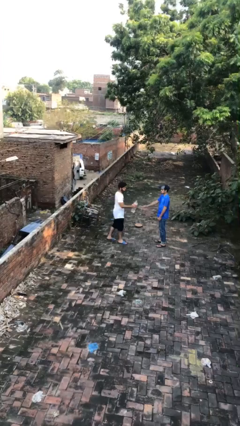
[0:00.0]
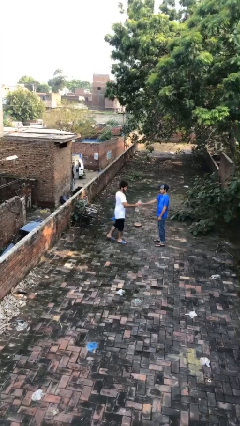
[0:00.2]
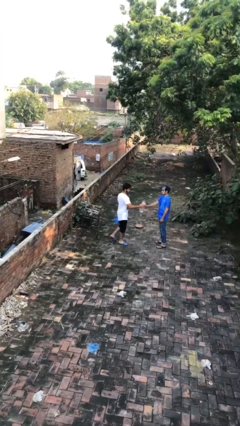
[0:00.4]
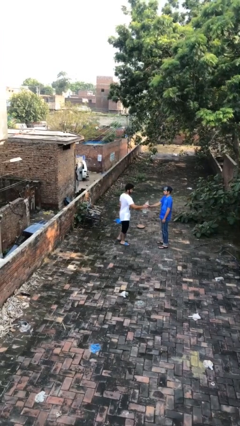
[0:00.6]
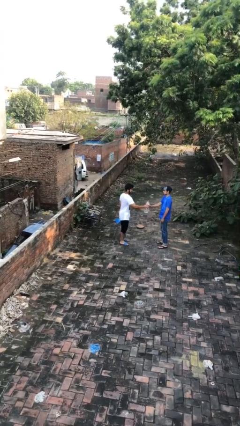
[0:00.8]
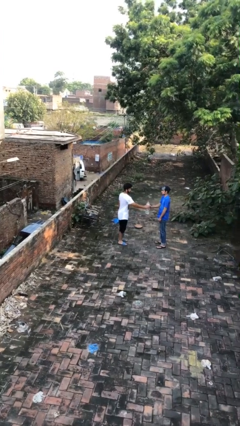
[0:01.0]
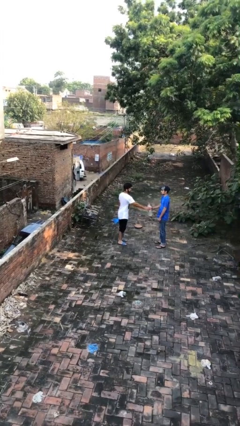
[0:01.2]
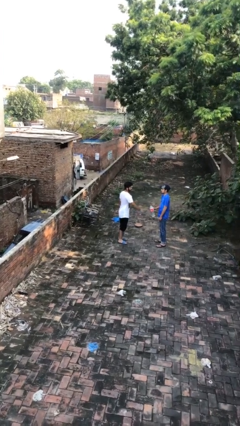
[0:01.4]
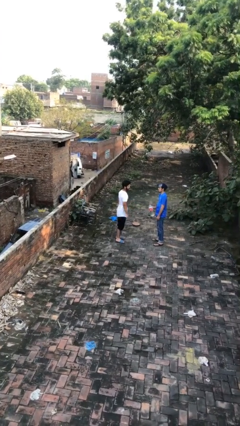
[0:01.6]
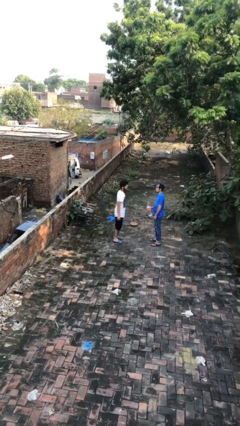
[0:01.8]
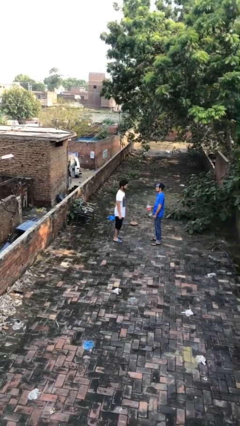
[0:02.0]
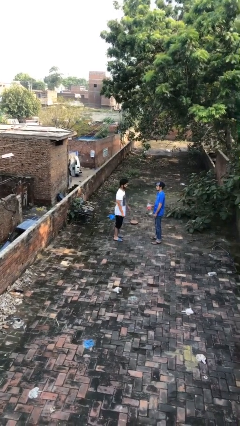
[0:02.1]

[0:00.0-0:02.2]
person transfers object to person

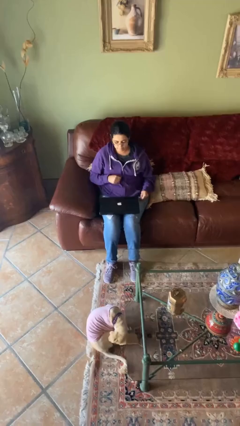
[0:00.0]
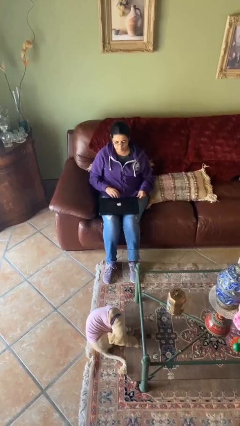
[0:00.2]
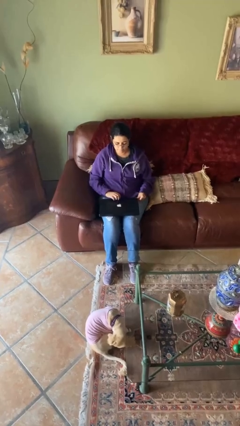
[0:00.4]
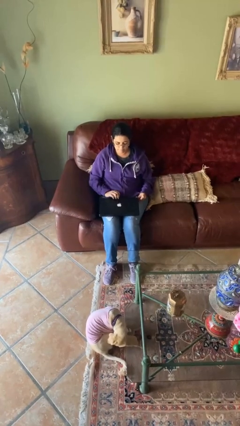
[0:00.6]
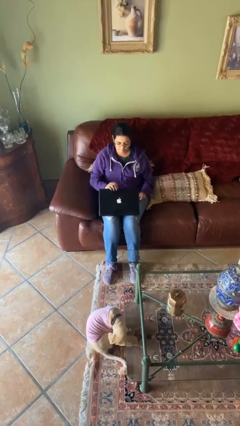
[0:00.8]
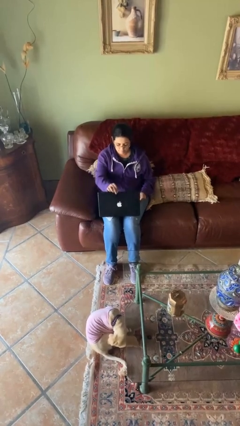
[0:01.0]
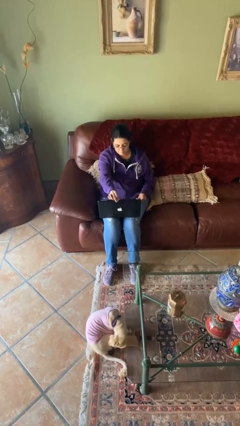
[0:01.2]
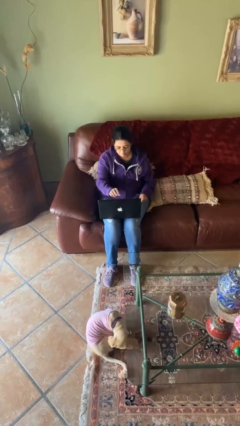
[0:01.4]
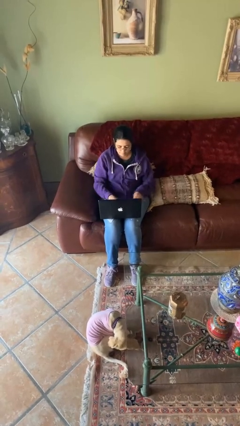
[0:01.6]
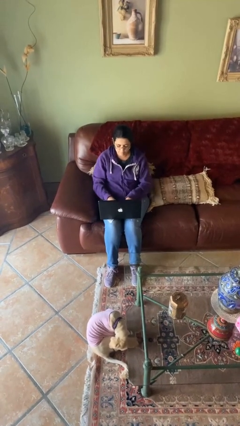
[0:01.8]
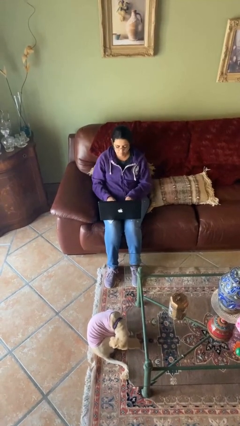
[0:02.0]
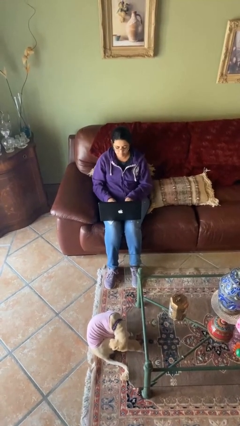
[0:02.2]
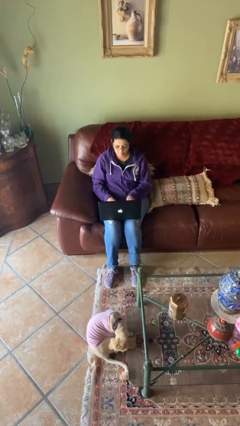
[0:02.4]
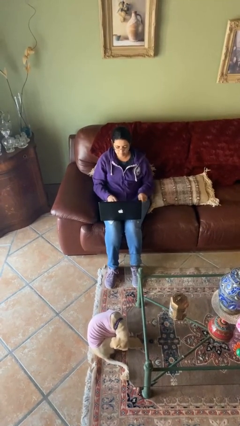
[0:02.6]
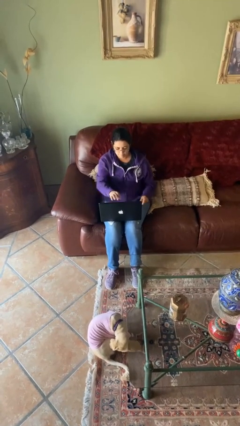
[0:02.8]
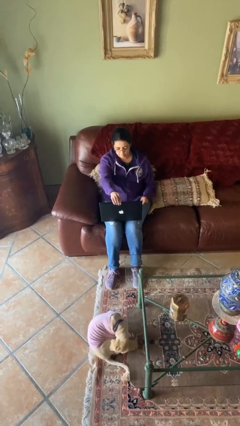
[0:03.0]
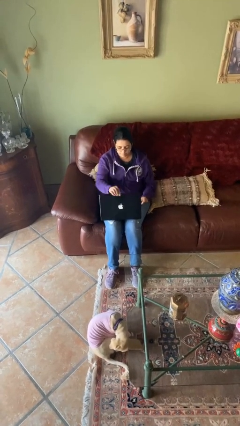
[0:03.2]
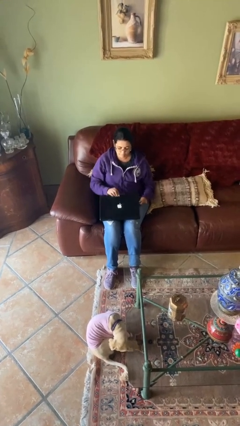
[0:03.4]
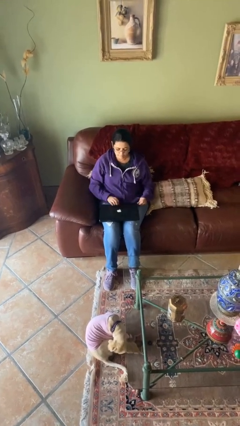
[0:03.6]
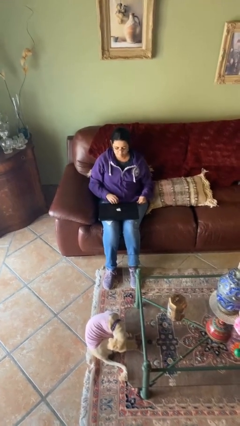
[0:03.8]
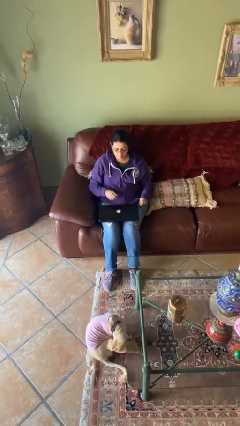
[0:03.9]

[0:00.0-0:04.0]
person interacts with laptop

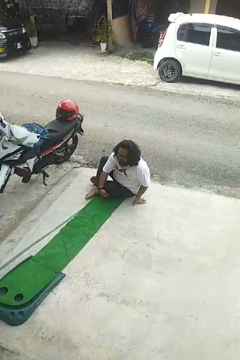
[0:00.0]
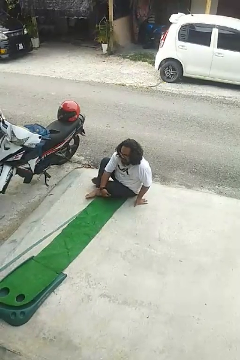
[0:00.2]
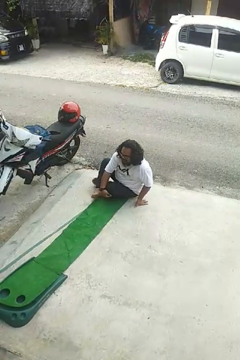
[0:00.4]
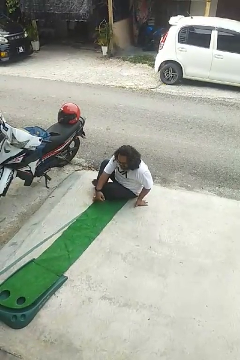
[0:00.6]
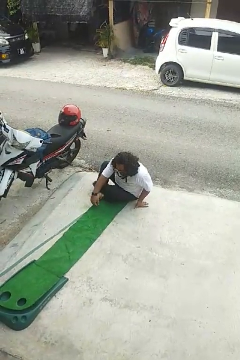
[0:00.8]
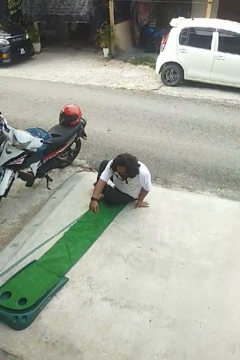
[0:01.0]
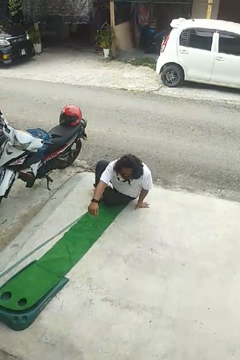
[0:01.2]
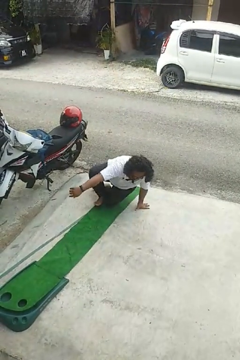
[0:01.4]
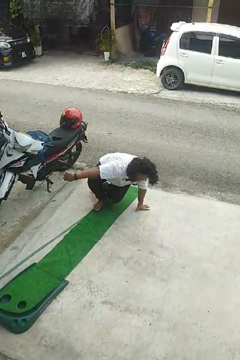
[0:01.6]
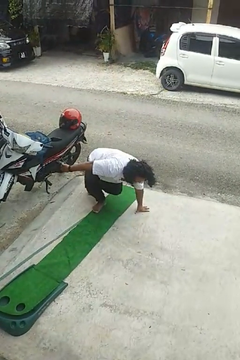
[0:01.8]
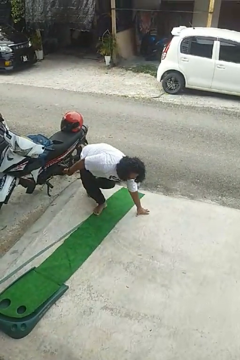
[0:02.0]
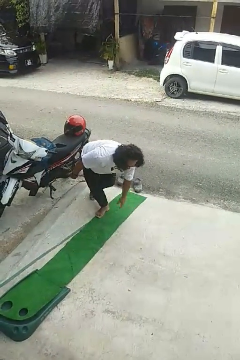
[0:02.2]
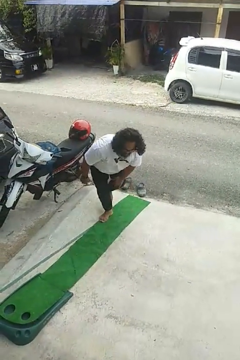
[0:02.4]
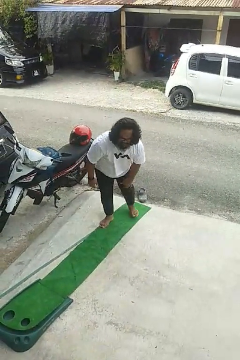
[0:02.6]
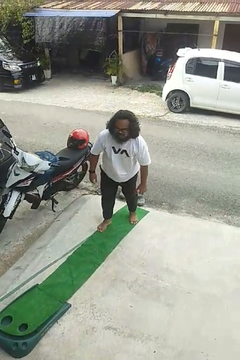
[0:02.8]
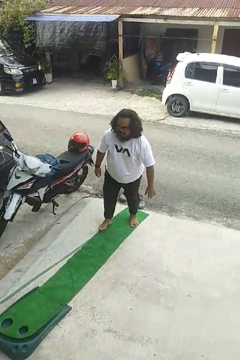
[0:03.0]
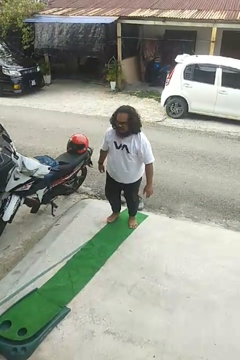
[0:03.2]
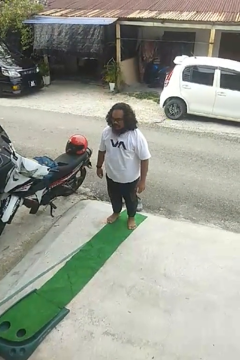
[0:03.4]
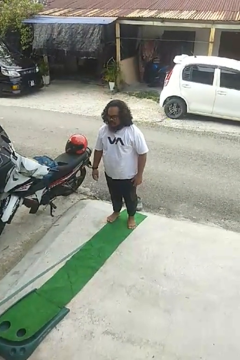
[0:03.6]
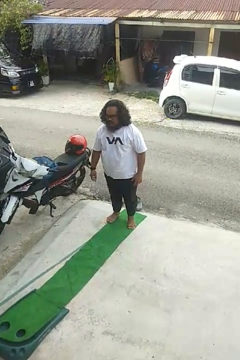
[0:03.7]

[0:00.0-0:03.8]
person stands up from floor

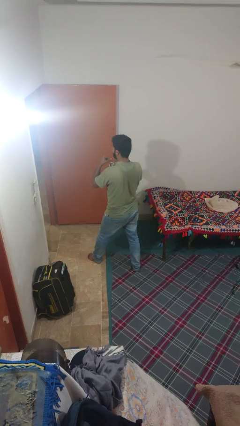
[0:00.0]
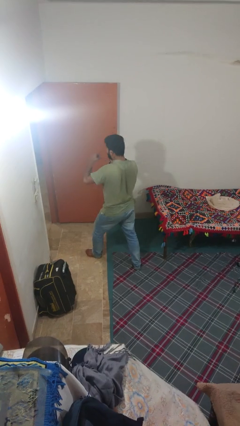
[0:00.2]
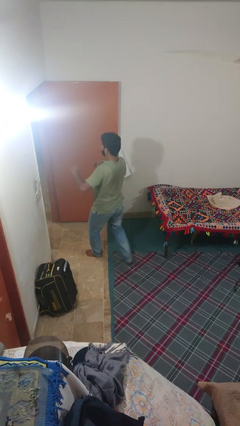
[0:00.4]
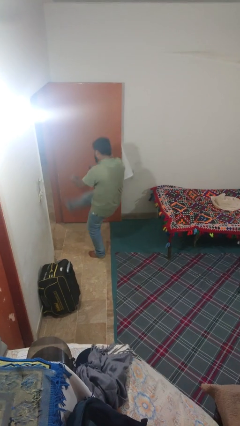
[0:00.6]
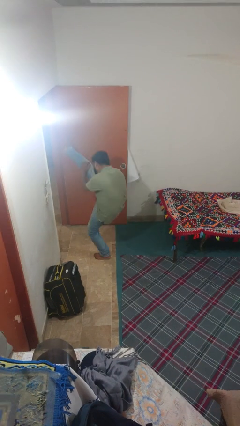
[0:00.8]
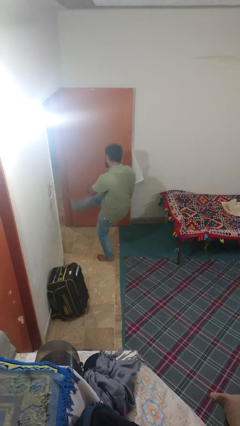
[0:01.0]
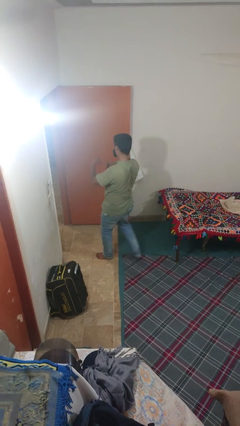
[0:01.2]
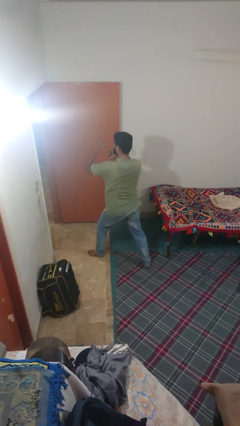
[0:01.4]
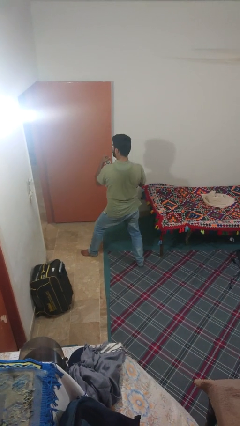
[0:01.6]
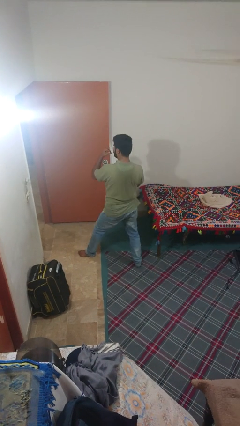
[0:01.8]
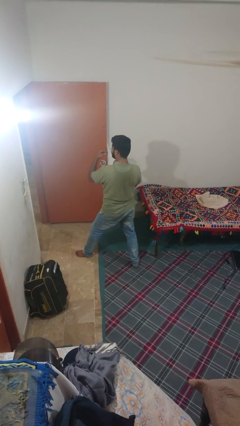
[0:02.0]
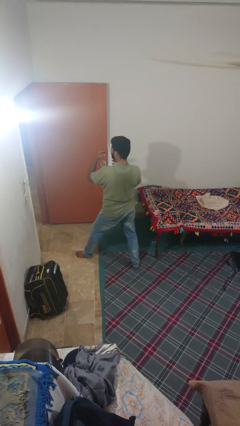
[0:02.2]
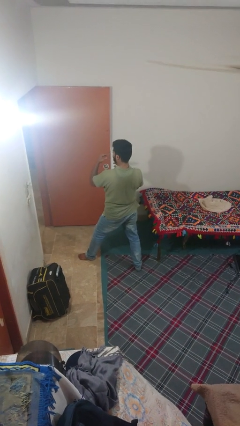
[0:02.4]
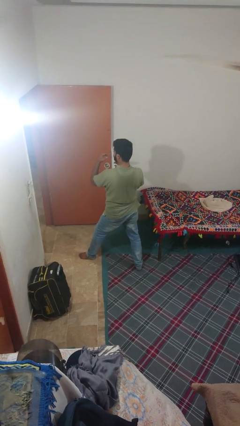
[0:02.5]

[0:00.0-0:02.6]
person karate kicks

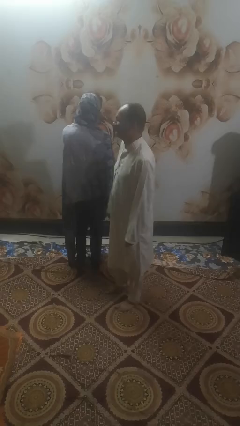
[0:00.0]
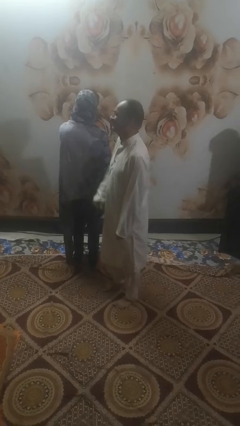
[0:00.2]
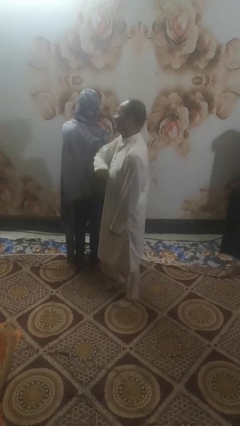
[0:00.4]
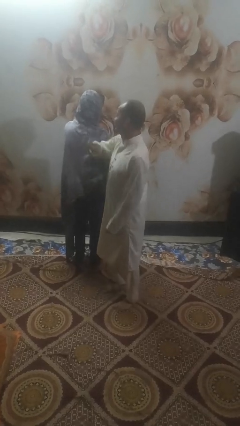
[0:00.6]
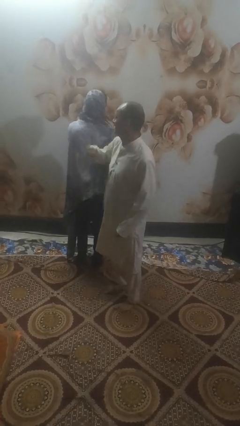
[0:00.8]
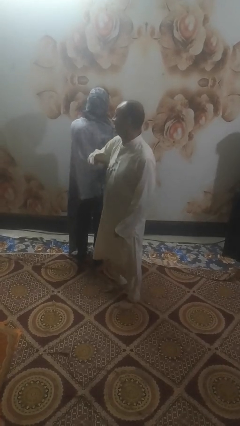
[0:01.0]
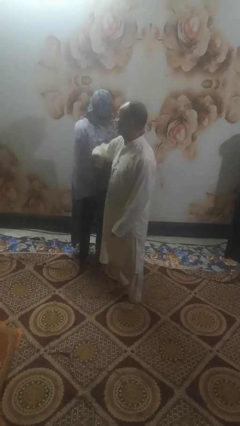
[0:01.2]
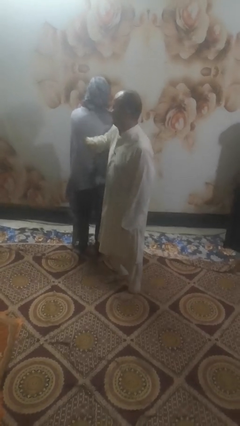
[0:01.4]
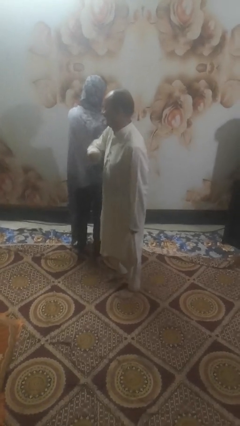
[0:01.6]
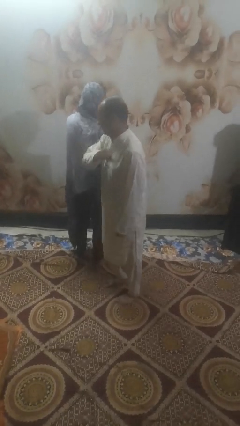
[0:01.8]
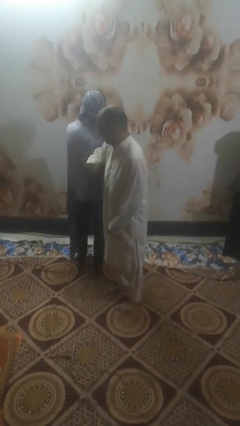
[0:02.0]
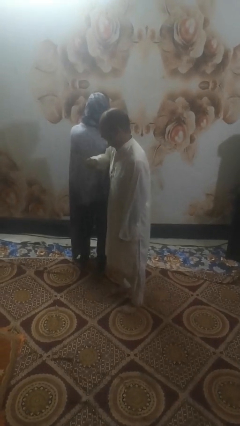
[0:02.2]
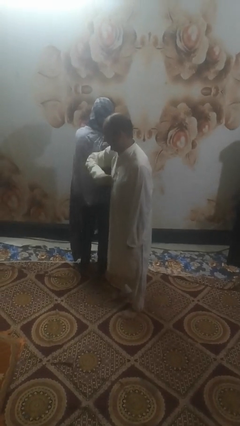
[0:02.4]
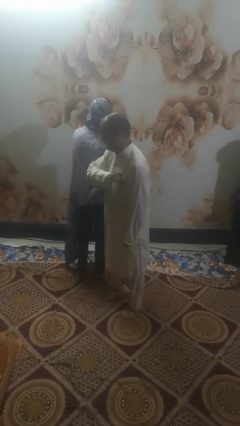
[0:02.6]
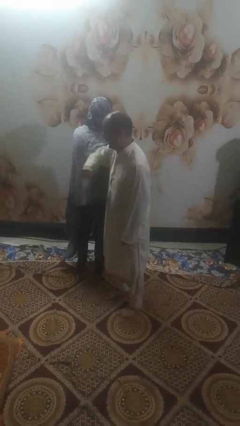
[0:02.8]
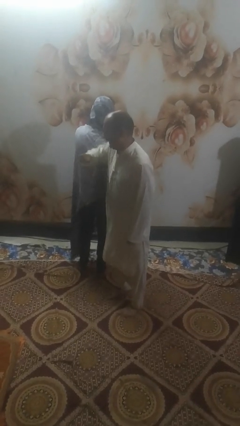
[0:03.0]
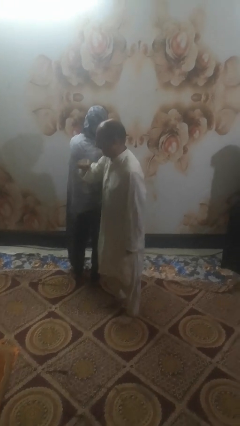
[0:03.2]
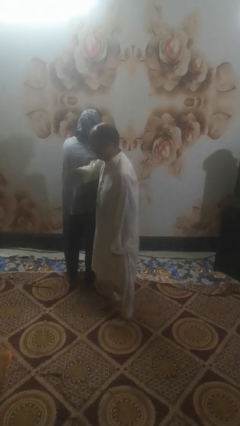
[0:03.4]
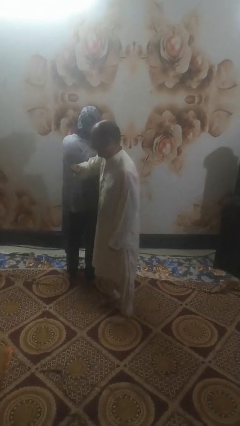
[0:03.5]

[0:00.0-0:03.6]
person nudges person with elbow

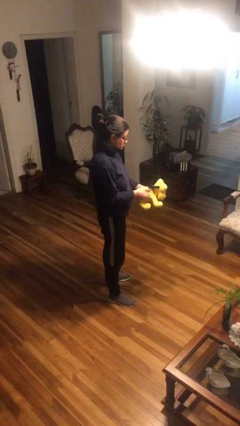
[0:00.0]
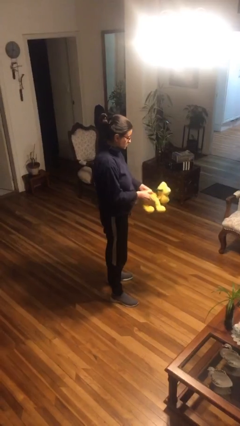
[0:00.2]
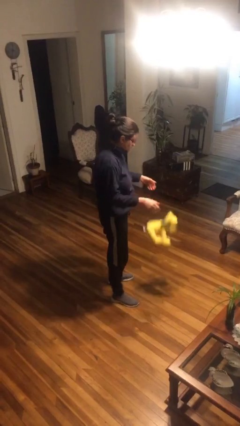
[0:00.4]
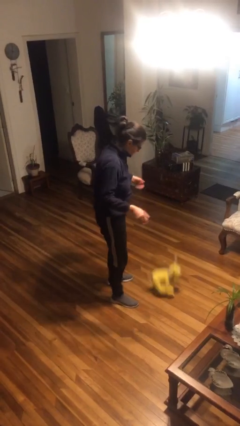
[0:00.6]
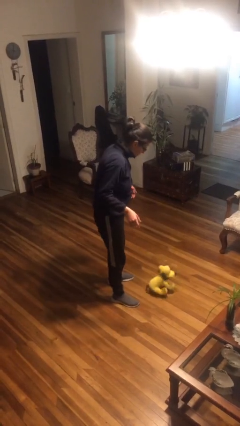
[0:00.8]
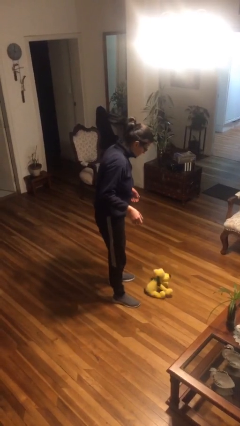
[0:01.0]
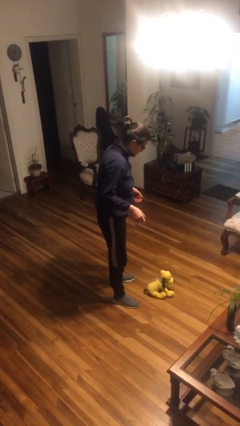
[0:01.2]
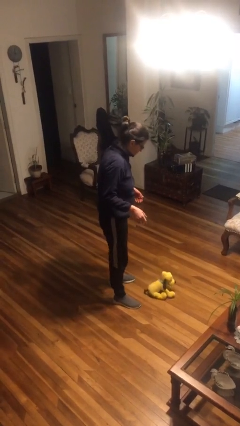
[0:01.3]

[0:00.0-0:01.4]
person drops object

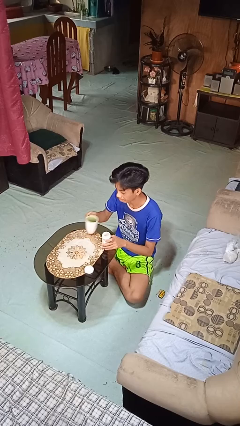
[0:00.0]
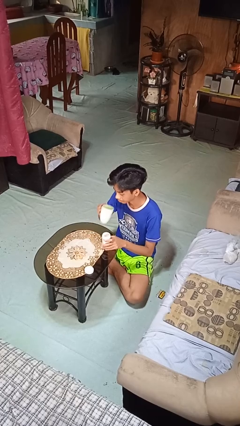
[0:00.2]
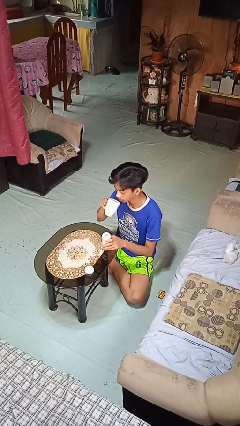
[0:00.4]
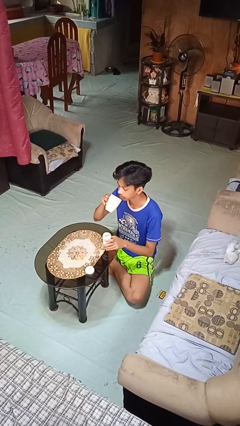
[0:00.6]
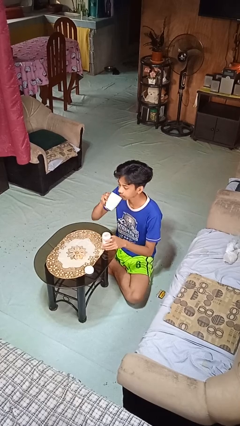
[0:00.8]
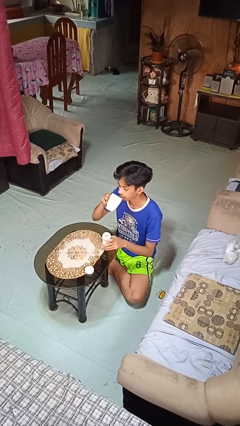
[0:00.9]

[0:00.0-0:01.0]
person drinks from cup
